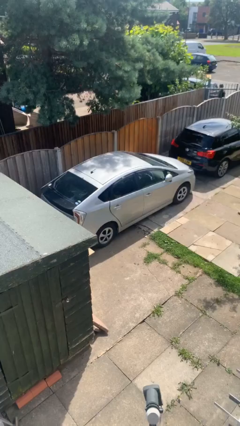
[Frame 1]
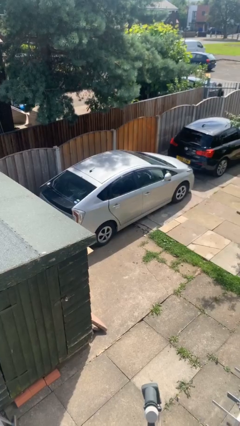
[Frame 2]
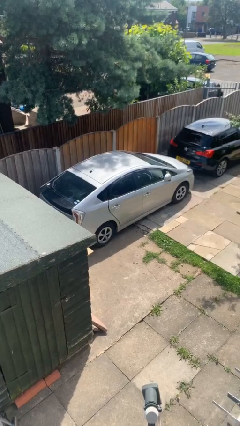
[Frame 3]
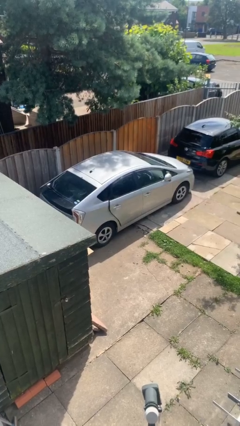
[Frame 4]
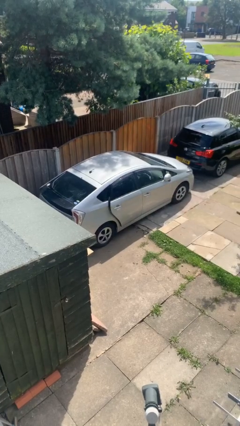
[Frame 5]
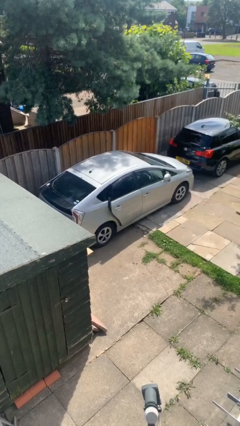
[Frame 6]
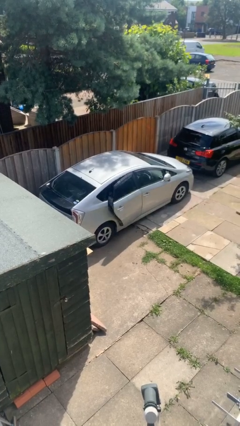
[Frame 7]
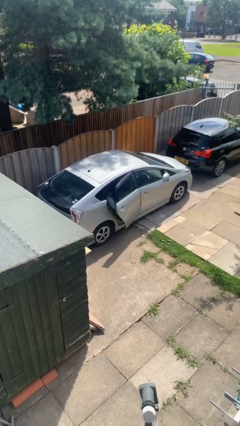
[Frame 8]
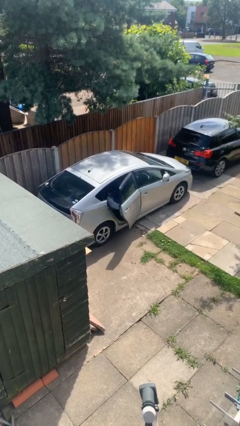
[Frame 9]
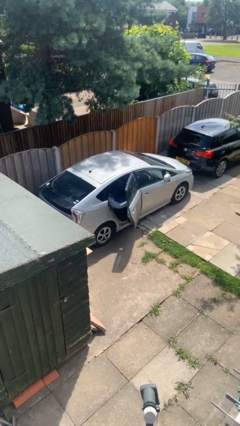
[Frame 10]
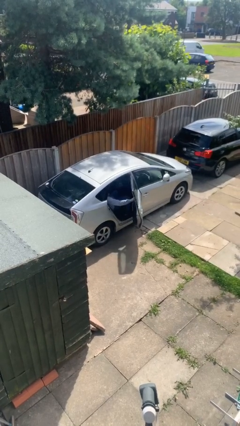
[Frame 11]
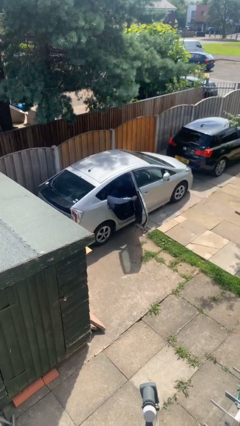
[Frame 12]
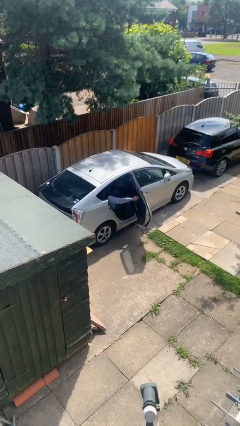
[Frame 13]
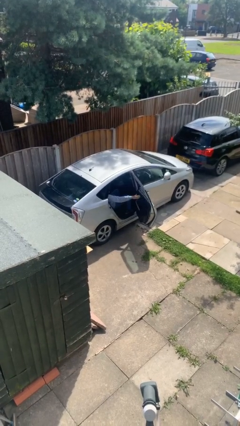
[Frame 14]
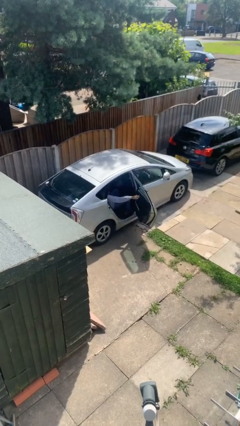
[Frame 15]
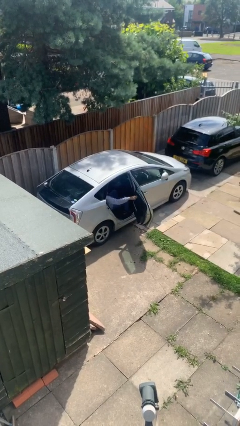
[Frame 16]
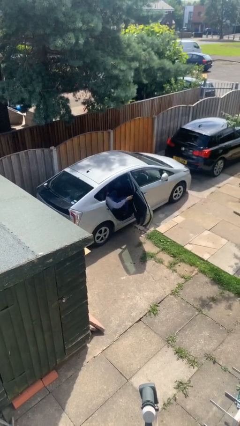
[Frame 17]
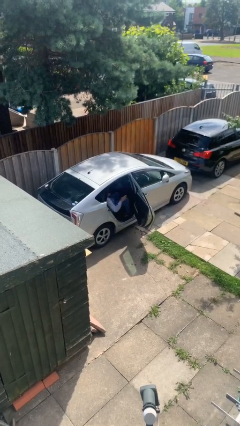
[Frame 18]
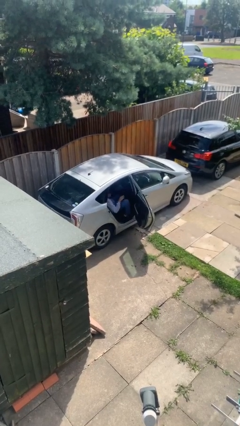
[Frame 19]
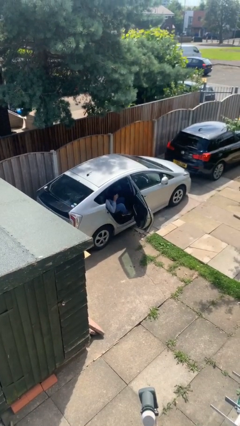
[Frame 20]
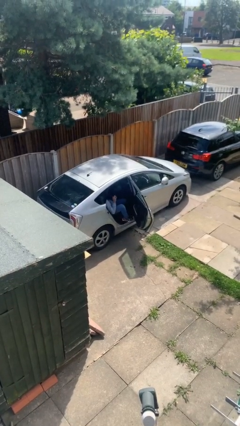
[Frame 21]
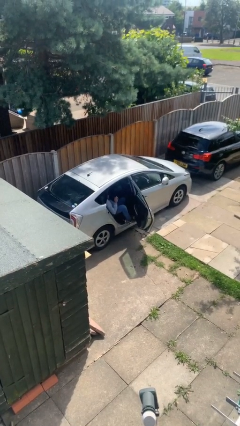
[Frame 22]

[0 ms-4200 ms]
person opens car door

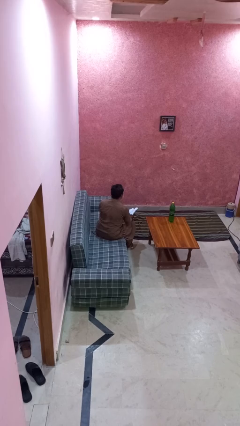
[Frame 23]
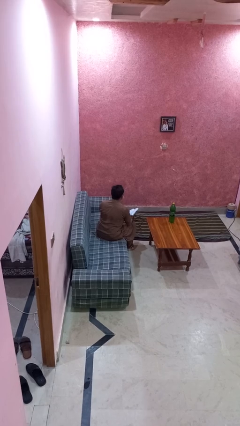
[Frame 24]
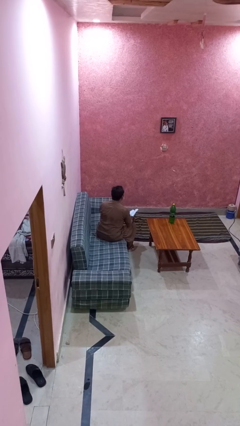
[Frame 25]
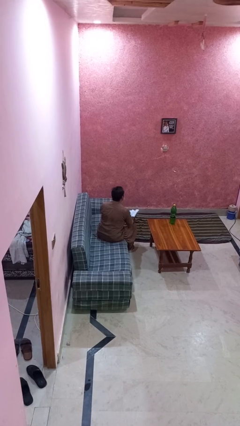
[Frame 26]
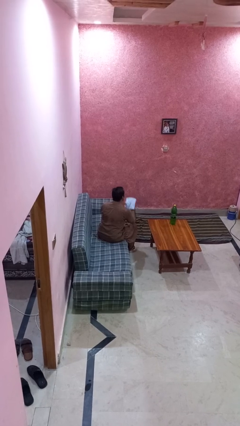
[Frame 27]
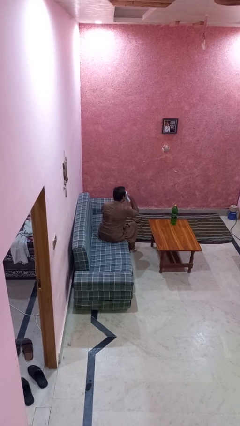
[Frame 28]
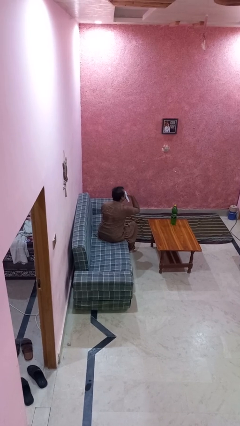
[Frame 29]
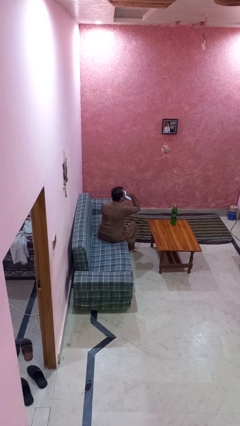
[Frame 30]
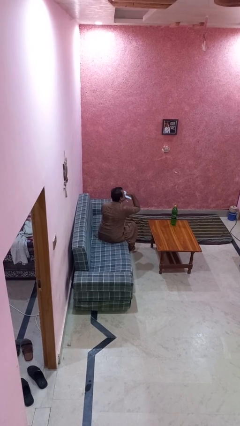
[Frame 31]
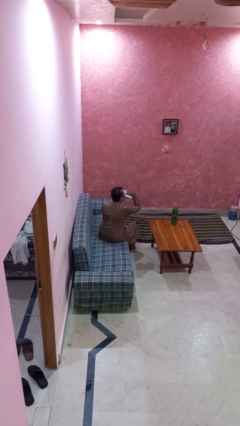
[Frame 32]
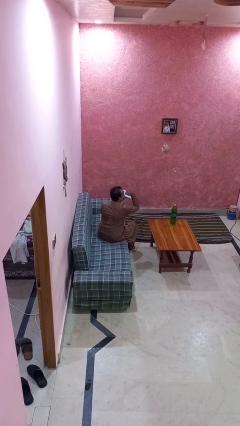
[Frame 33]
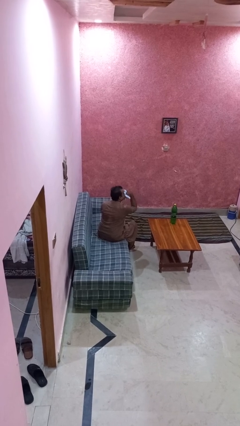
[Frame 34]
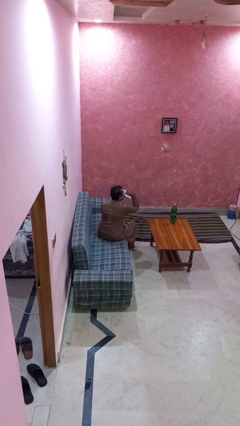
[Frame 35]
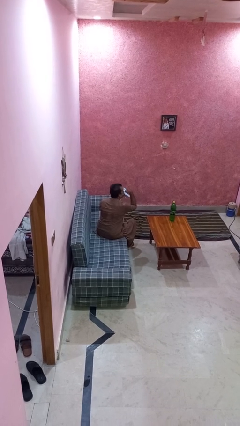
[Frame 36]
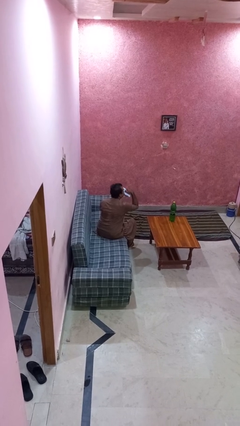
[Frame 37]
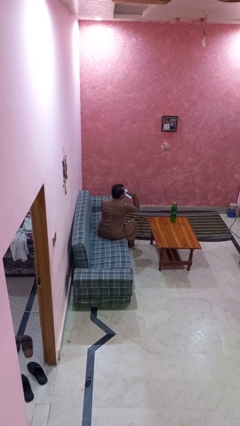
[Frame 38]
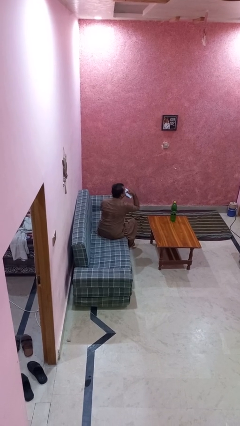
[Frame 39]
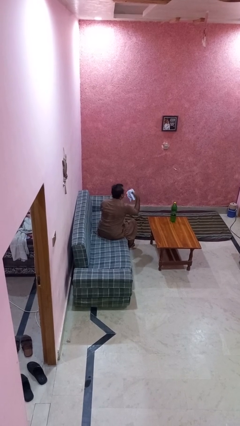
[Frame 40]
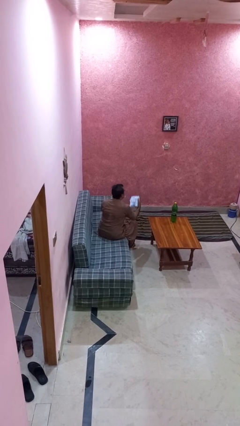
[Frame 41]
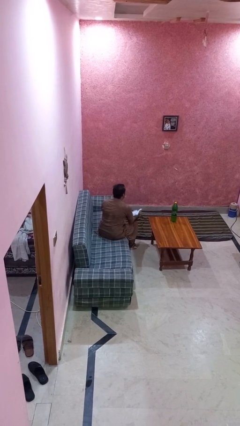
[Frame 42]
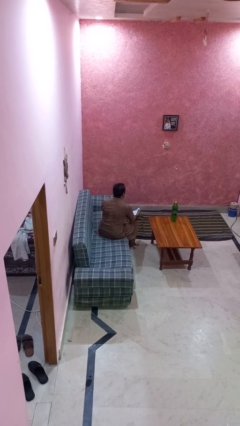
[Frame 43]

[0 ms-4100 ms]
person blows nose

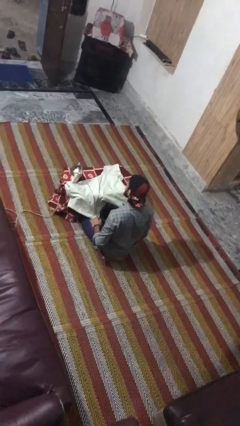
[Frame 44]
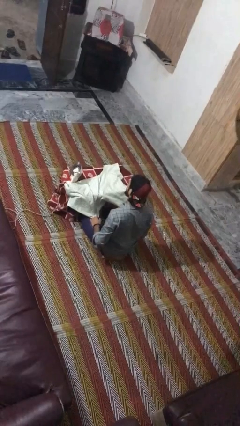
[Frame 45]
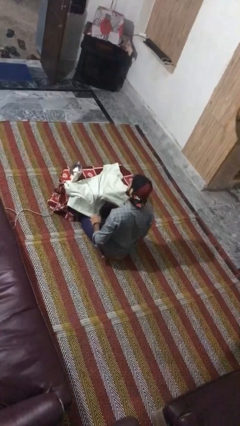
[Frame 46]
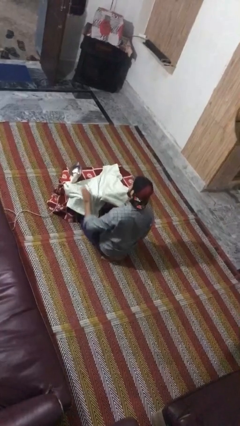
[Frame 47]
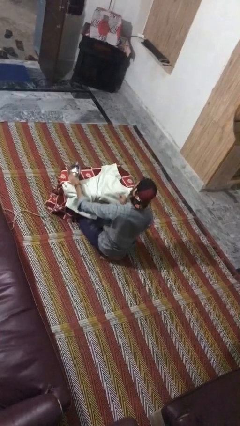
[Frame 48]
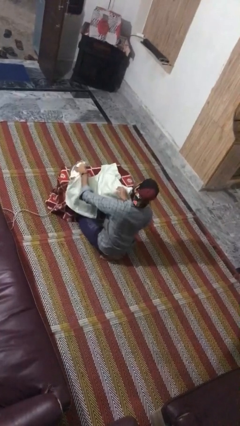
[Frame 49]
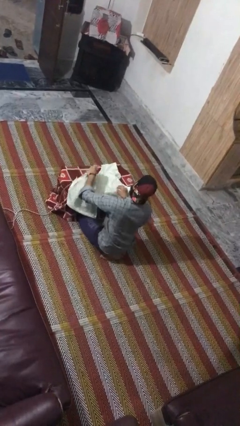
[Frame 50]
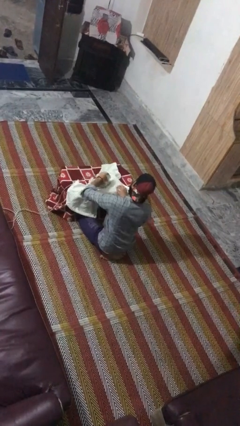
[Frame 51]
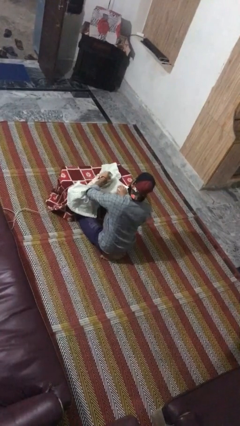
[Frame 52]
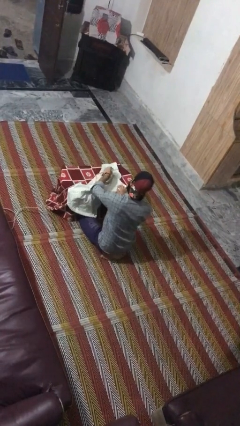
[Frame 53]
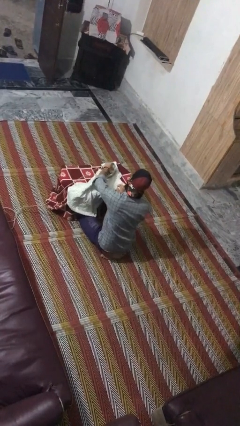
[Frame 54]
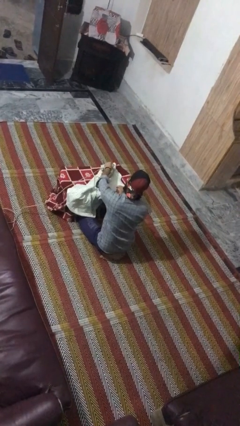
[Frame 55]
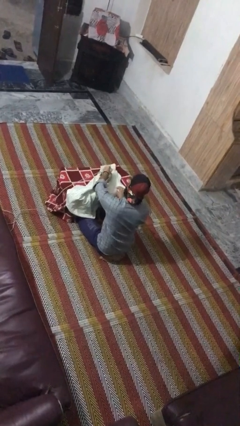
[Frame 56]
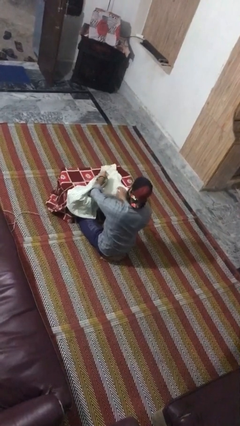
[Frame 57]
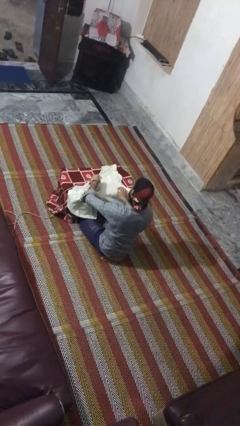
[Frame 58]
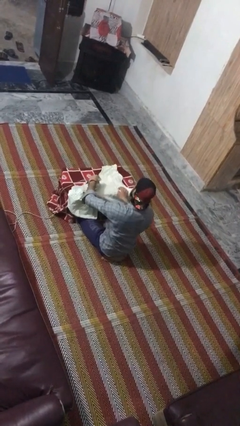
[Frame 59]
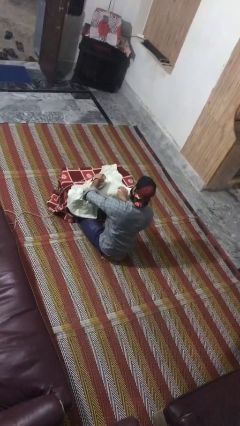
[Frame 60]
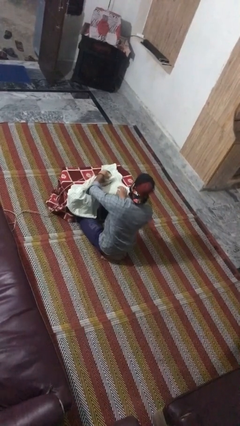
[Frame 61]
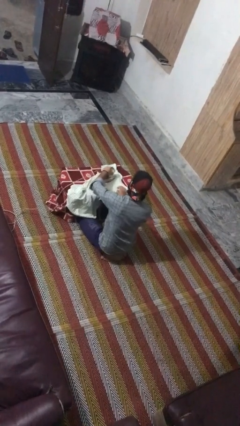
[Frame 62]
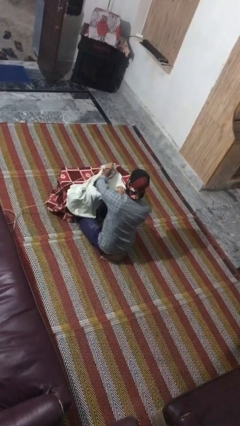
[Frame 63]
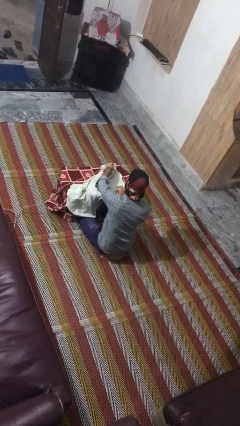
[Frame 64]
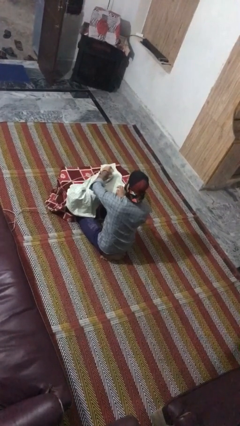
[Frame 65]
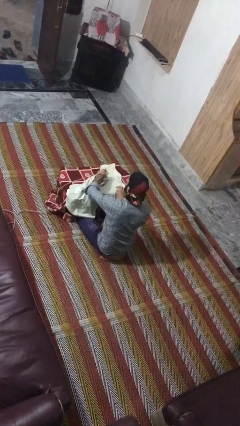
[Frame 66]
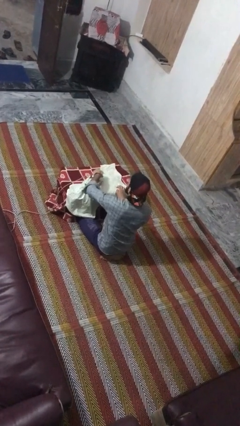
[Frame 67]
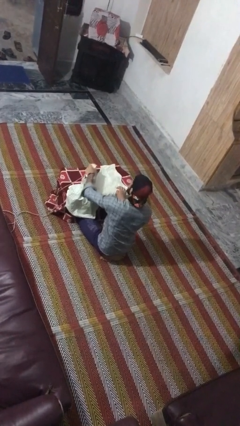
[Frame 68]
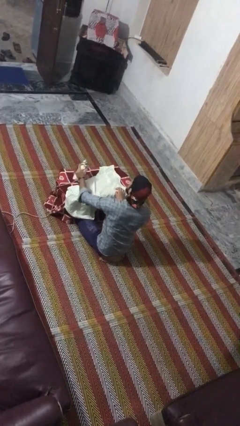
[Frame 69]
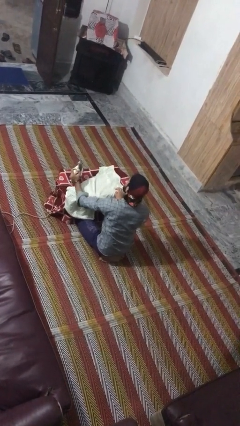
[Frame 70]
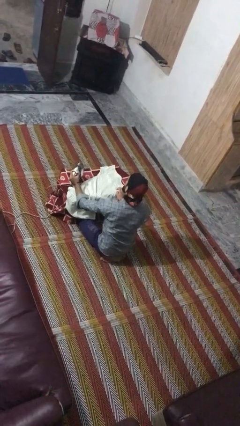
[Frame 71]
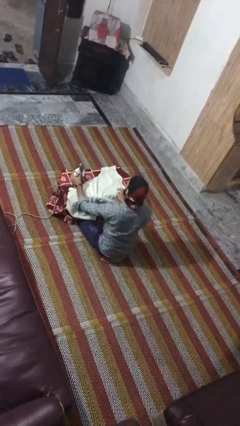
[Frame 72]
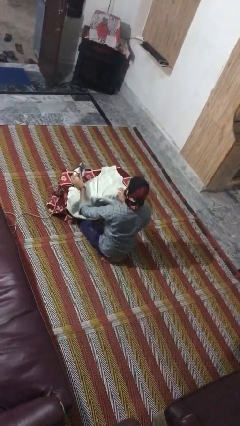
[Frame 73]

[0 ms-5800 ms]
person irons clothes

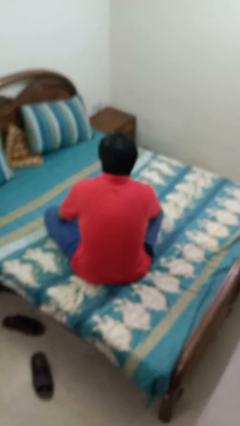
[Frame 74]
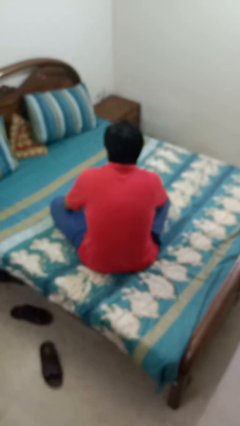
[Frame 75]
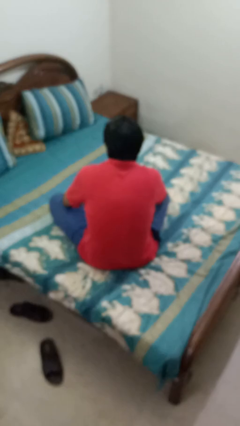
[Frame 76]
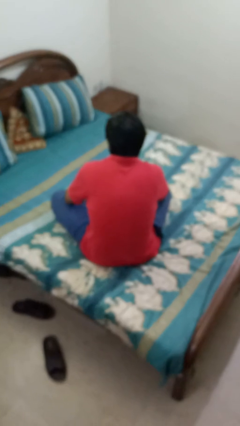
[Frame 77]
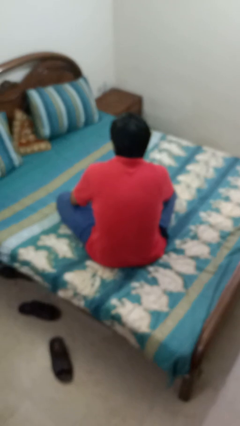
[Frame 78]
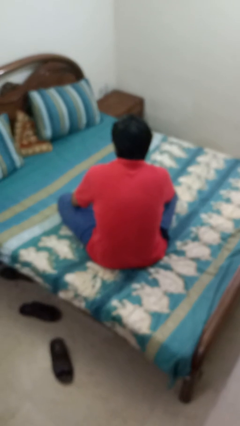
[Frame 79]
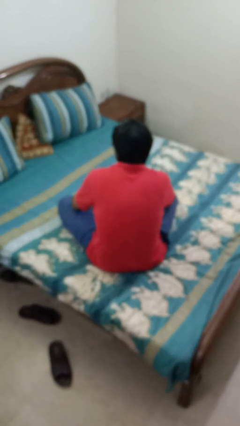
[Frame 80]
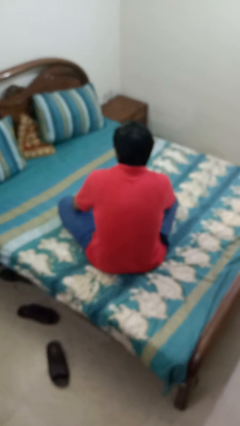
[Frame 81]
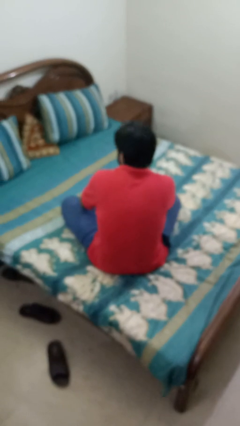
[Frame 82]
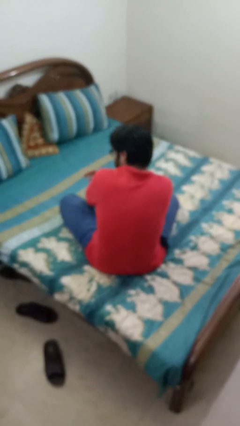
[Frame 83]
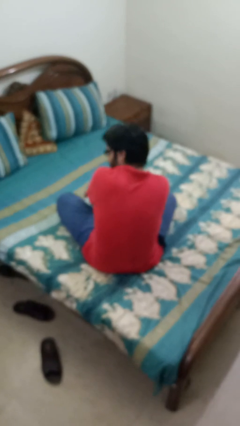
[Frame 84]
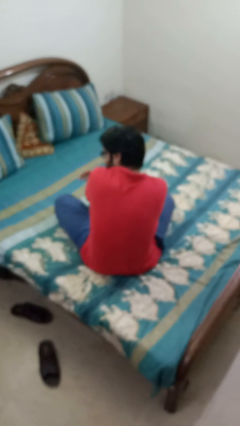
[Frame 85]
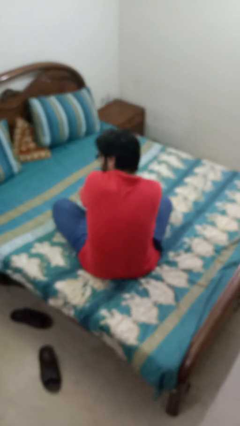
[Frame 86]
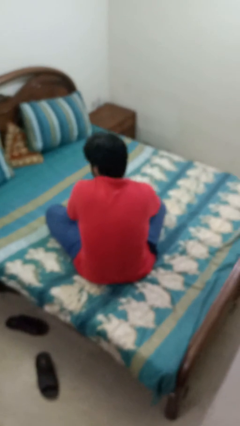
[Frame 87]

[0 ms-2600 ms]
person swats bug

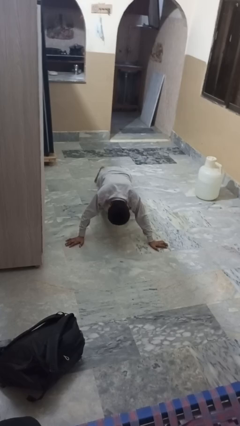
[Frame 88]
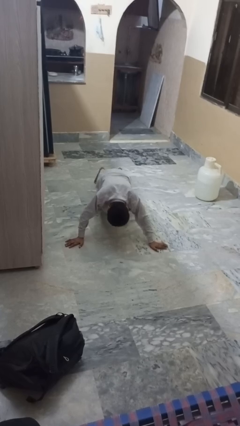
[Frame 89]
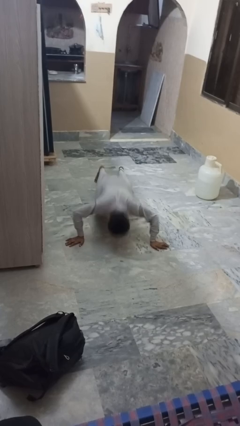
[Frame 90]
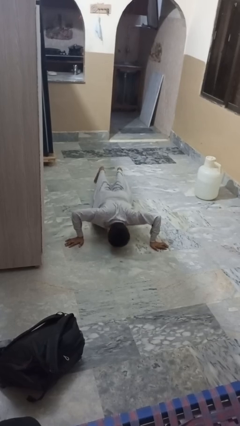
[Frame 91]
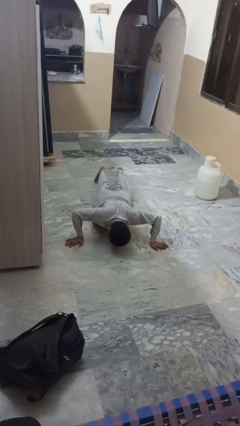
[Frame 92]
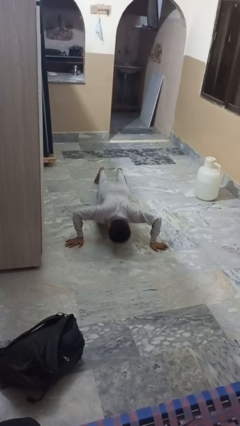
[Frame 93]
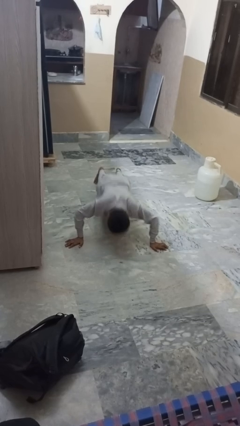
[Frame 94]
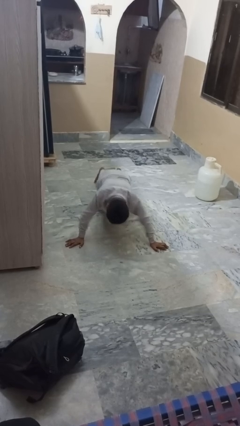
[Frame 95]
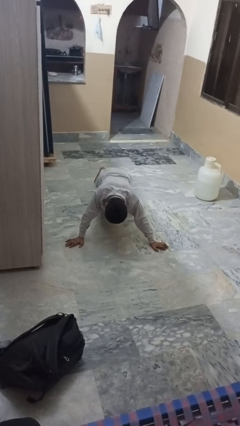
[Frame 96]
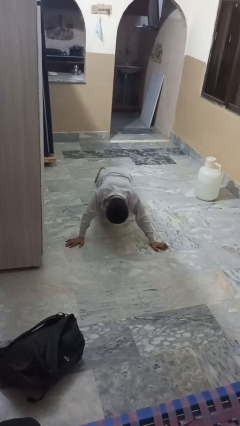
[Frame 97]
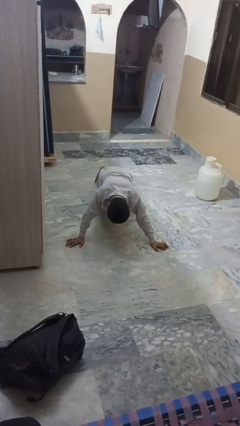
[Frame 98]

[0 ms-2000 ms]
person exercises with pushup
